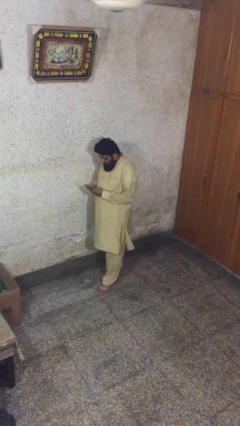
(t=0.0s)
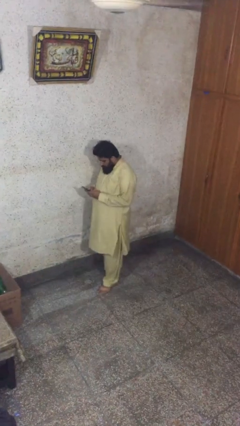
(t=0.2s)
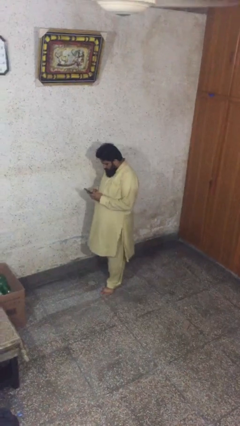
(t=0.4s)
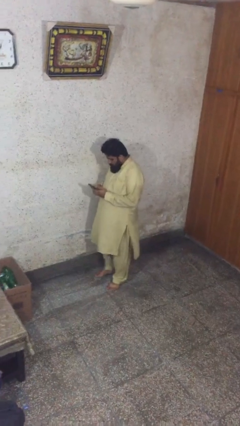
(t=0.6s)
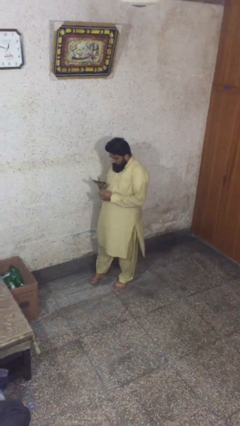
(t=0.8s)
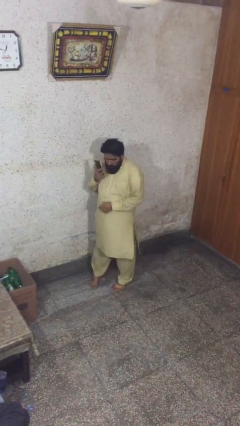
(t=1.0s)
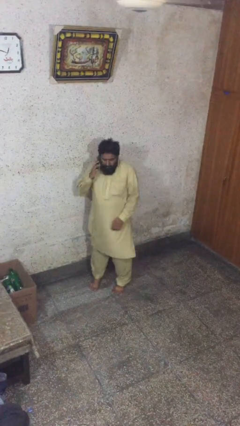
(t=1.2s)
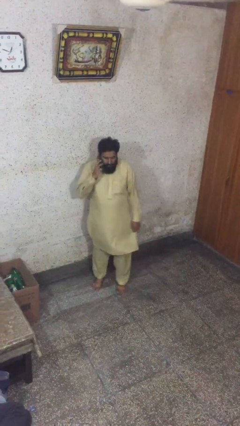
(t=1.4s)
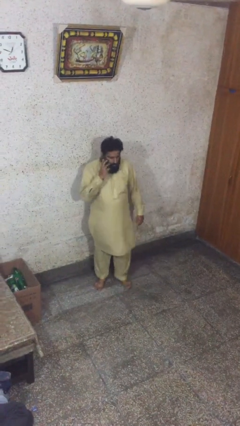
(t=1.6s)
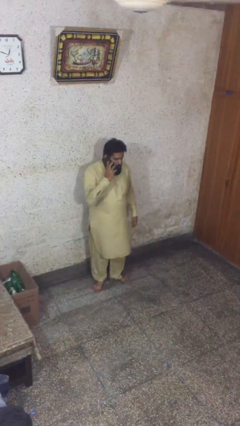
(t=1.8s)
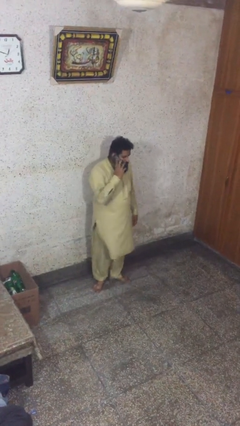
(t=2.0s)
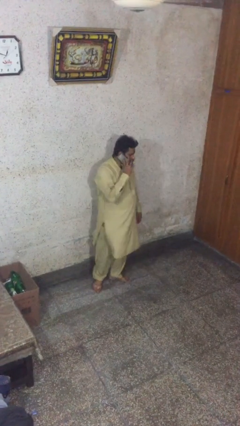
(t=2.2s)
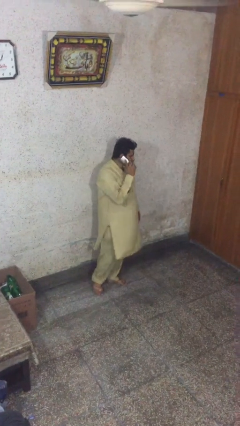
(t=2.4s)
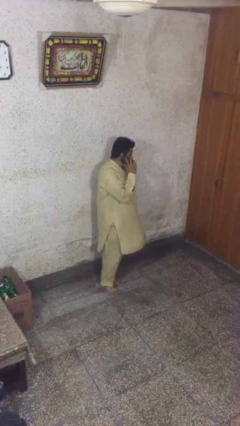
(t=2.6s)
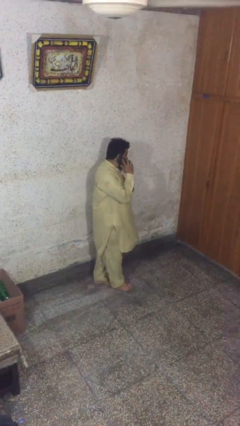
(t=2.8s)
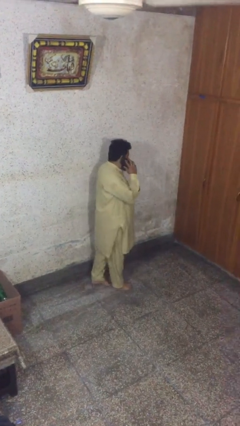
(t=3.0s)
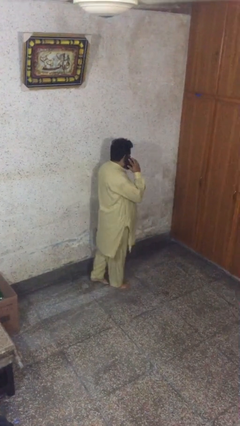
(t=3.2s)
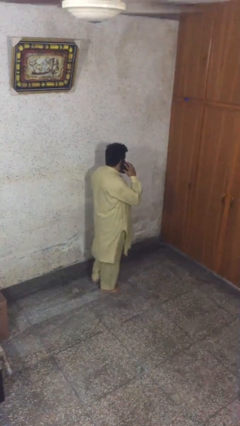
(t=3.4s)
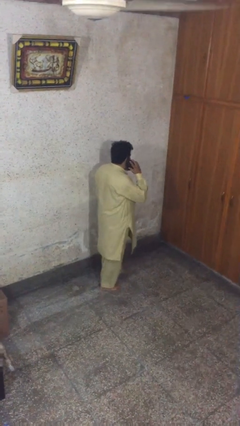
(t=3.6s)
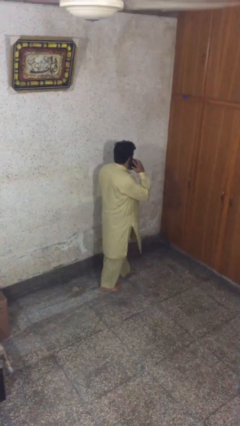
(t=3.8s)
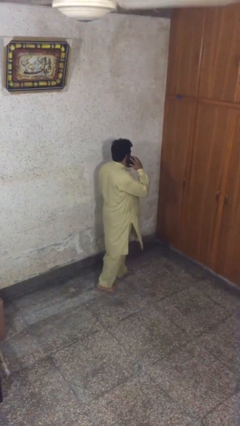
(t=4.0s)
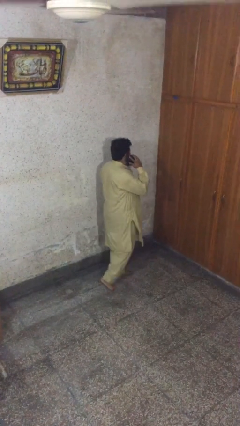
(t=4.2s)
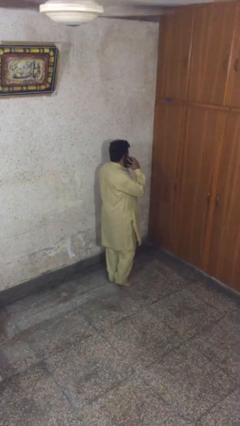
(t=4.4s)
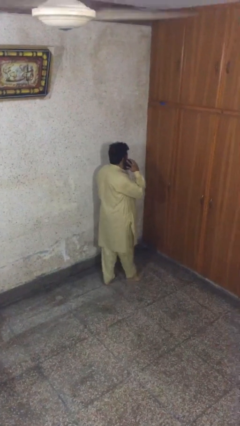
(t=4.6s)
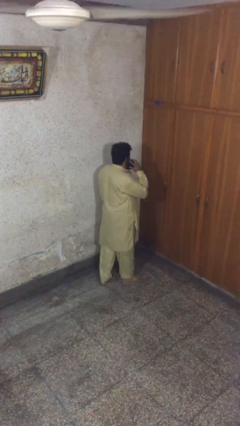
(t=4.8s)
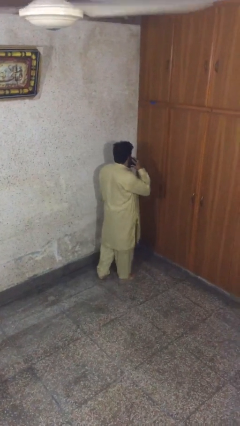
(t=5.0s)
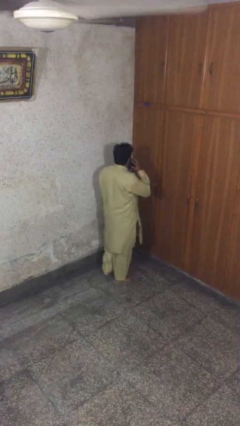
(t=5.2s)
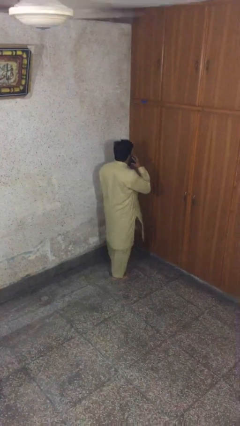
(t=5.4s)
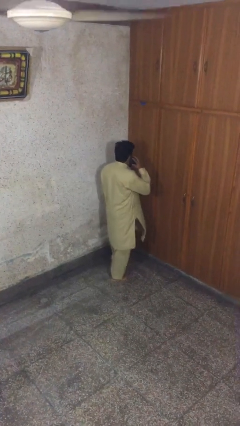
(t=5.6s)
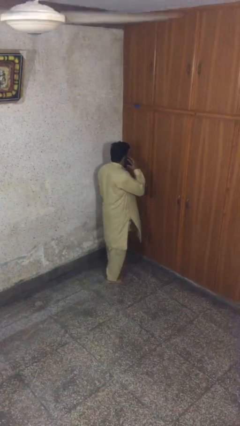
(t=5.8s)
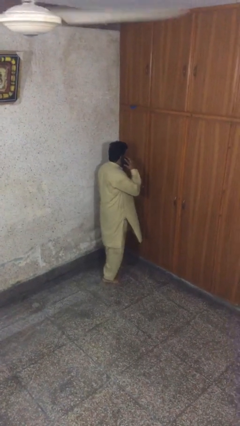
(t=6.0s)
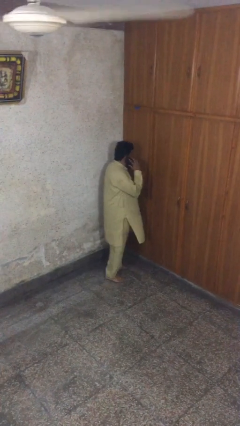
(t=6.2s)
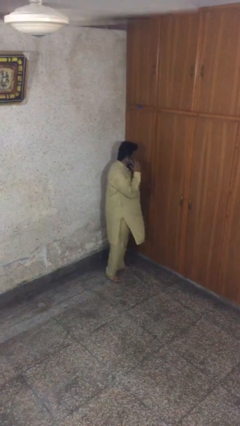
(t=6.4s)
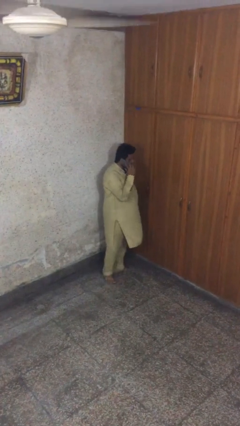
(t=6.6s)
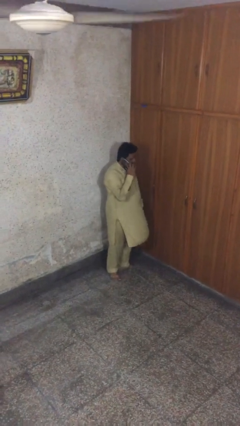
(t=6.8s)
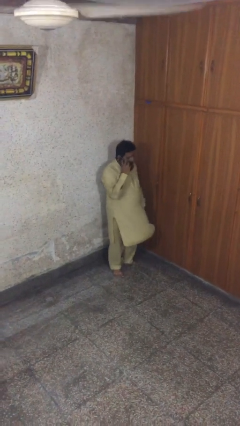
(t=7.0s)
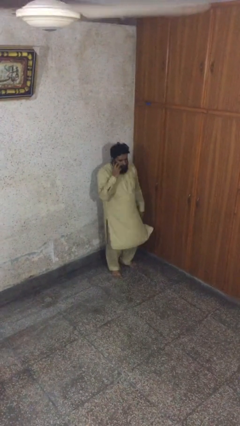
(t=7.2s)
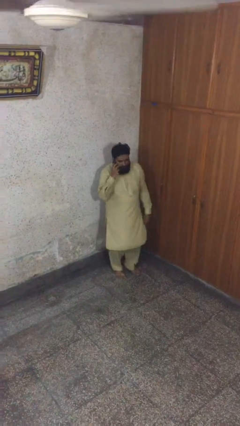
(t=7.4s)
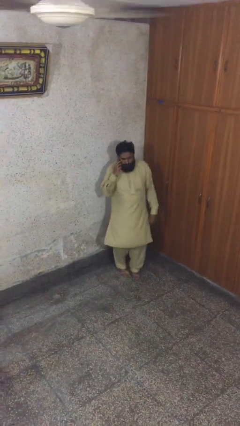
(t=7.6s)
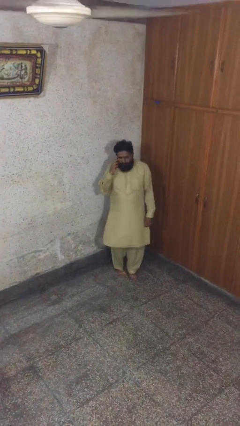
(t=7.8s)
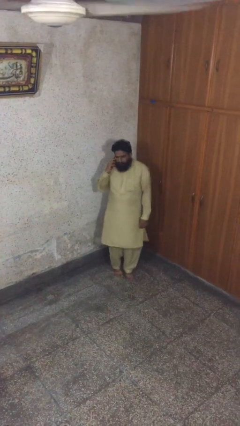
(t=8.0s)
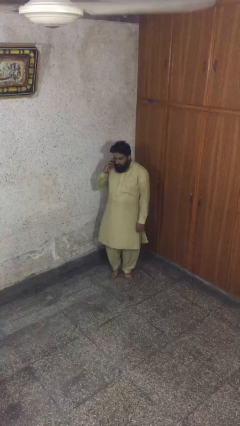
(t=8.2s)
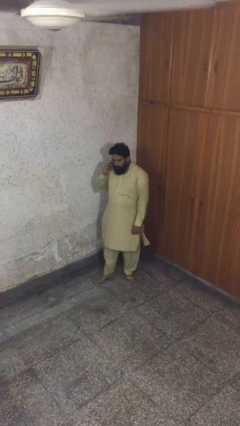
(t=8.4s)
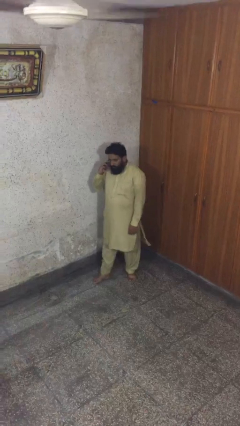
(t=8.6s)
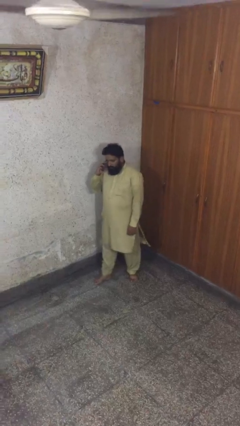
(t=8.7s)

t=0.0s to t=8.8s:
person talks on phone

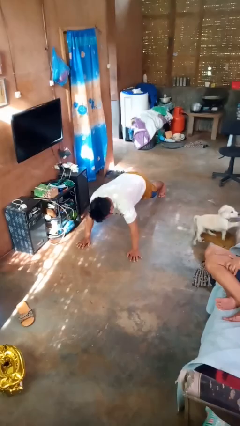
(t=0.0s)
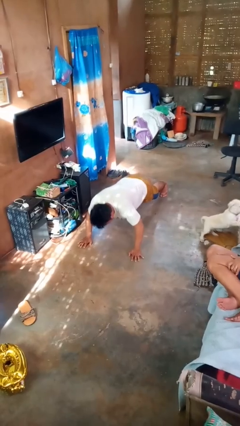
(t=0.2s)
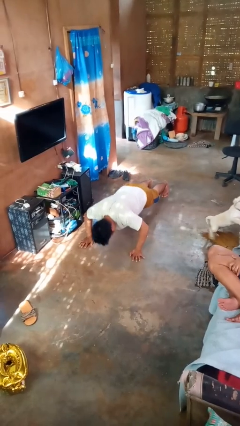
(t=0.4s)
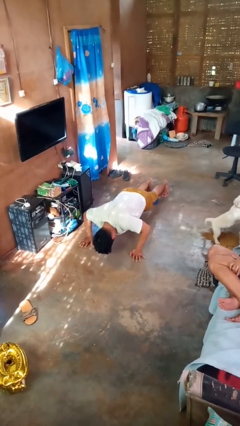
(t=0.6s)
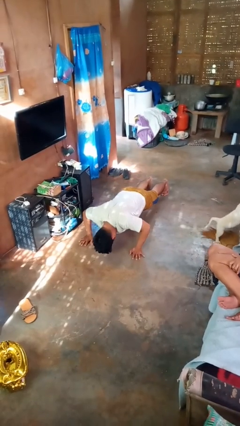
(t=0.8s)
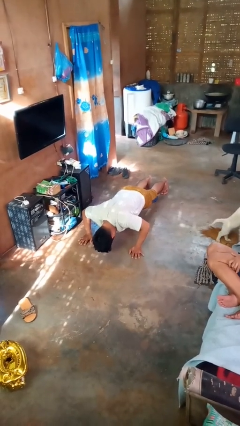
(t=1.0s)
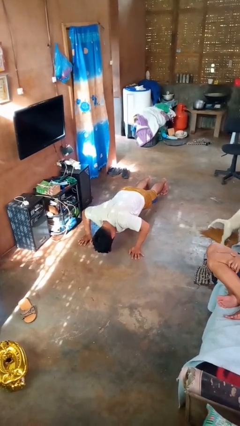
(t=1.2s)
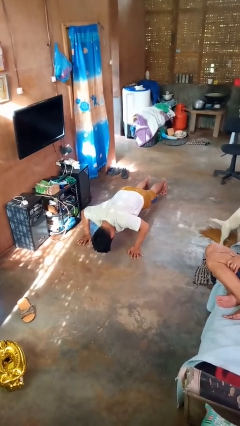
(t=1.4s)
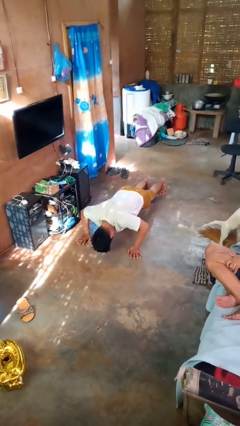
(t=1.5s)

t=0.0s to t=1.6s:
person exercises with pushup

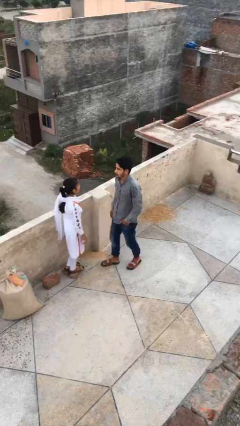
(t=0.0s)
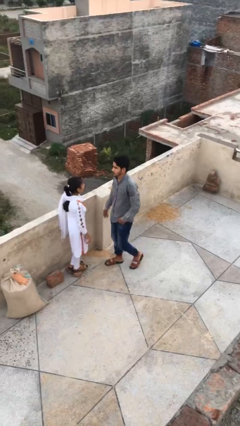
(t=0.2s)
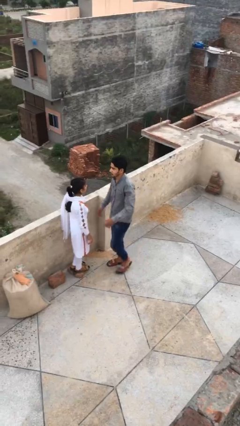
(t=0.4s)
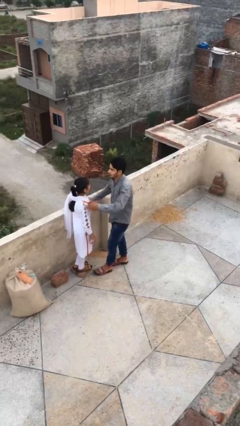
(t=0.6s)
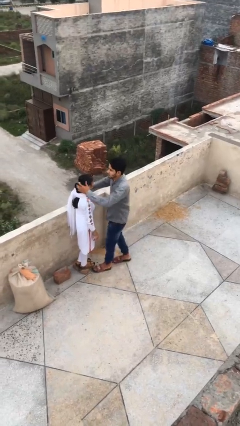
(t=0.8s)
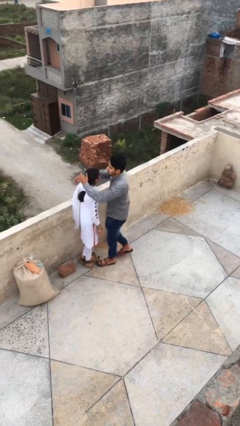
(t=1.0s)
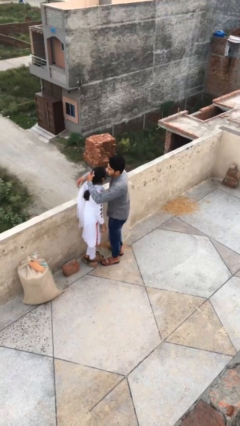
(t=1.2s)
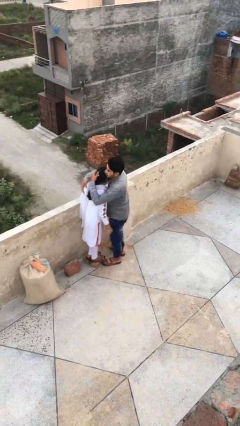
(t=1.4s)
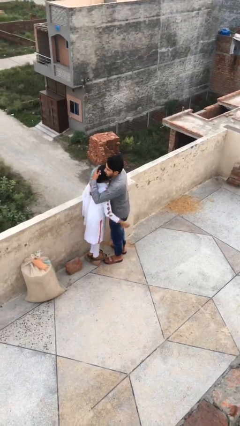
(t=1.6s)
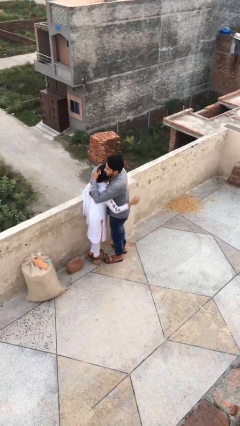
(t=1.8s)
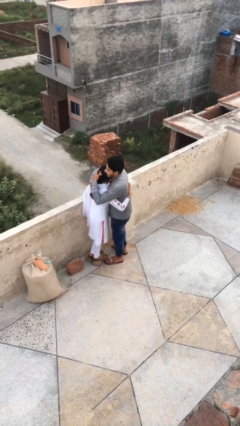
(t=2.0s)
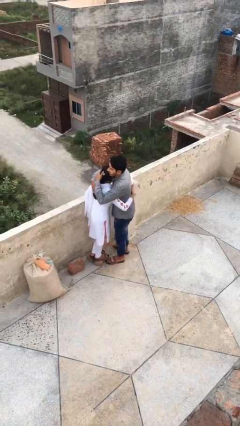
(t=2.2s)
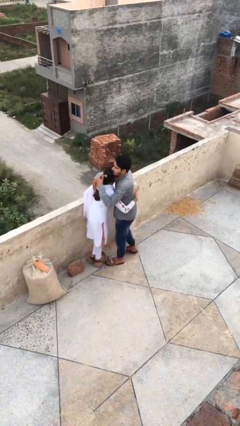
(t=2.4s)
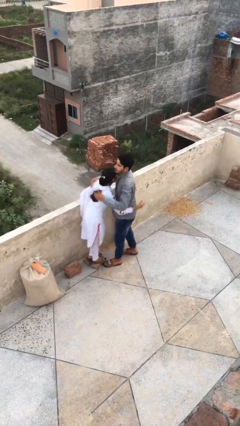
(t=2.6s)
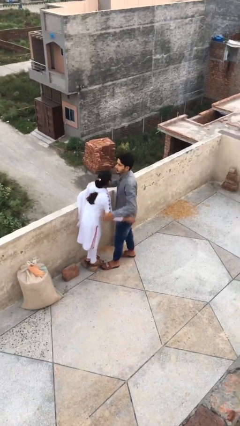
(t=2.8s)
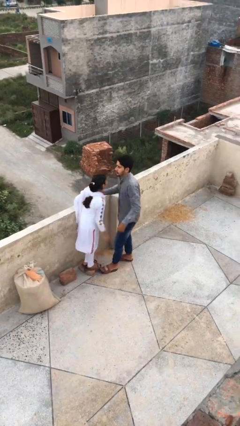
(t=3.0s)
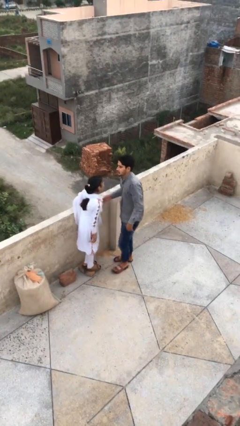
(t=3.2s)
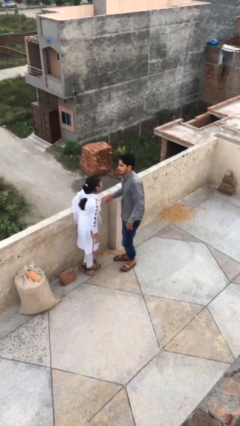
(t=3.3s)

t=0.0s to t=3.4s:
person embraces person

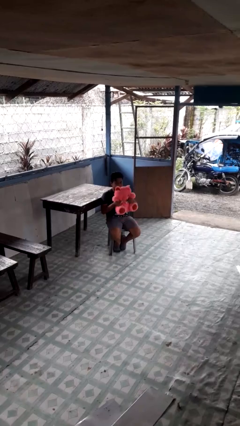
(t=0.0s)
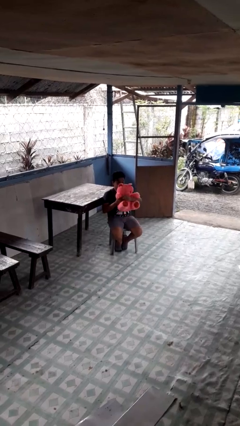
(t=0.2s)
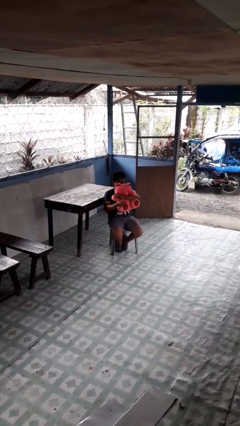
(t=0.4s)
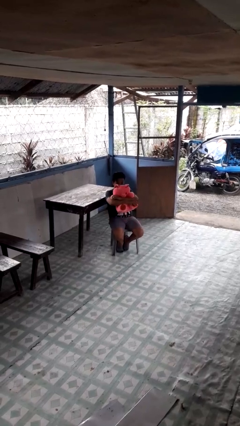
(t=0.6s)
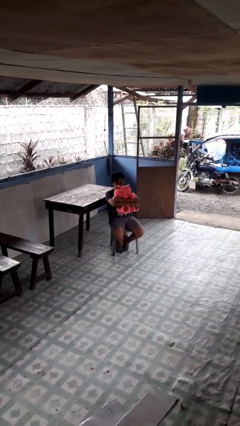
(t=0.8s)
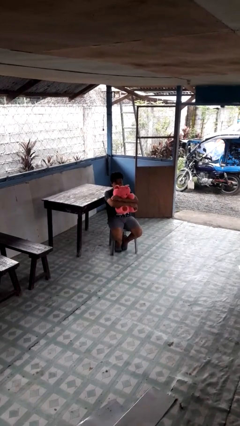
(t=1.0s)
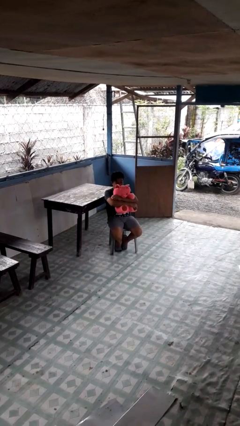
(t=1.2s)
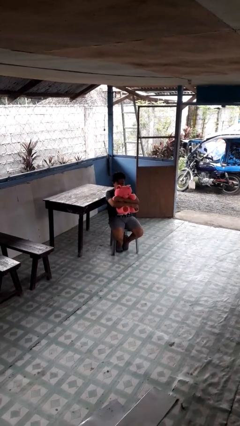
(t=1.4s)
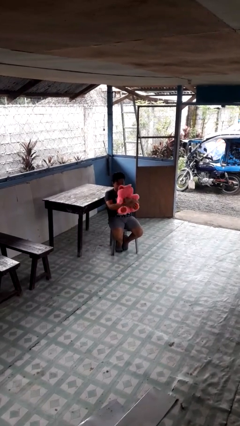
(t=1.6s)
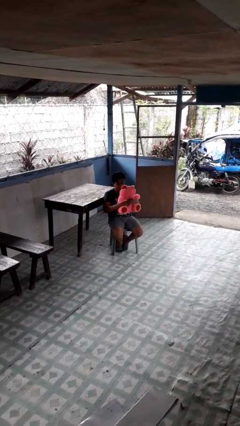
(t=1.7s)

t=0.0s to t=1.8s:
person hugs stuffed animal

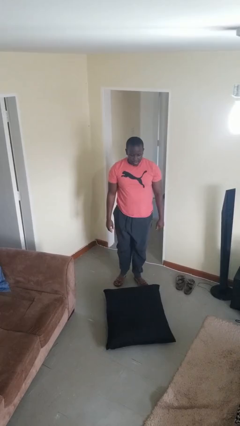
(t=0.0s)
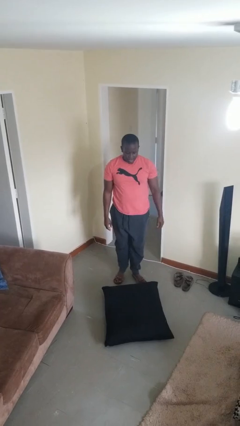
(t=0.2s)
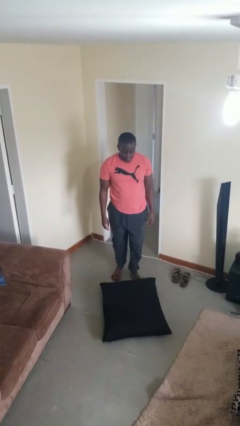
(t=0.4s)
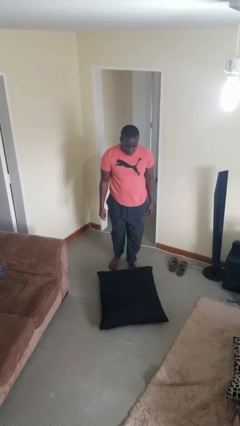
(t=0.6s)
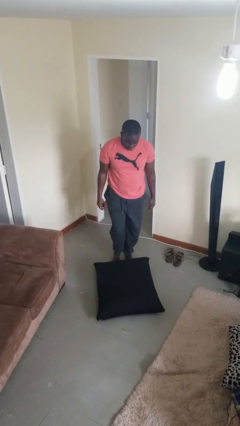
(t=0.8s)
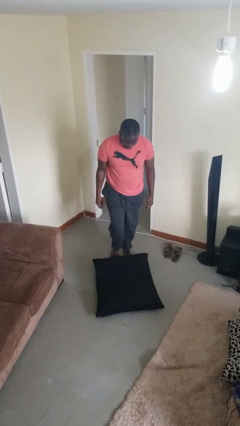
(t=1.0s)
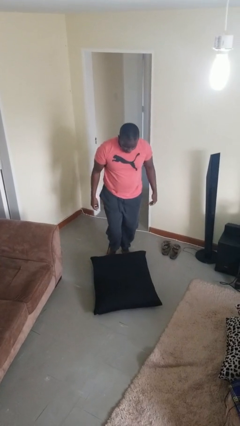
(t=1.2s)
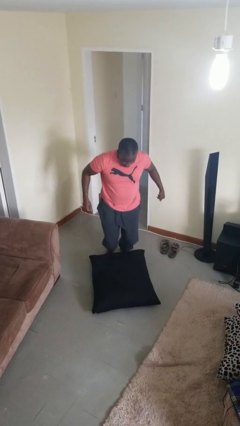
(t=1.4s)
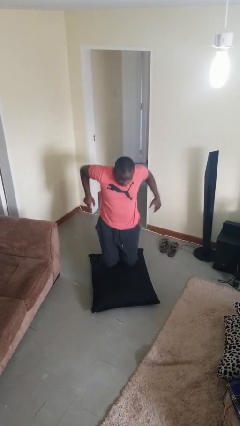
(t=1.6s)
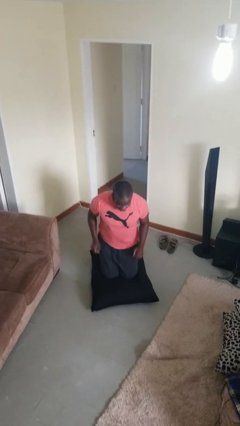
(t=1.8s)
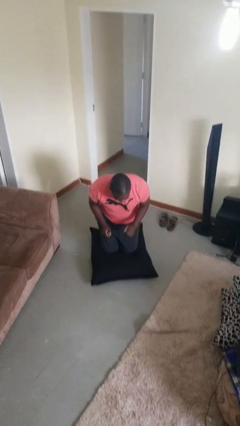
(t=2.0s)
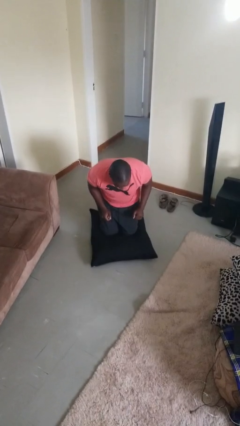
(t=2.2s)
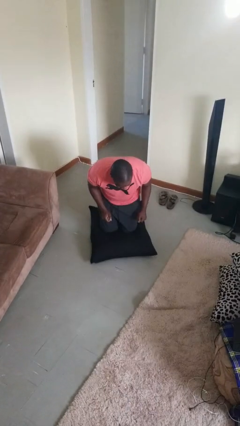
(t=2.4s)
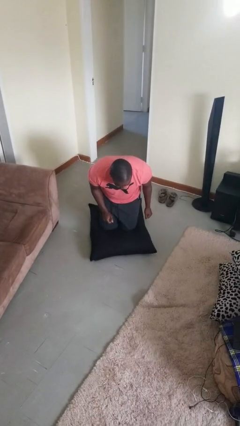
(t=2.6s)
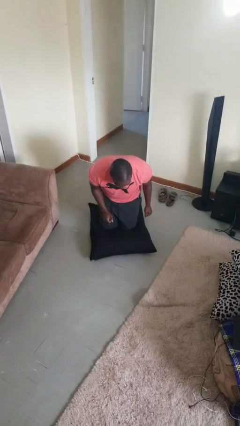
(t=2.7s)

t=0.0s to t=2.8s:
person trips on object on floor
